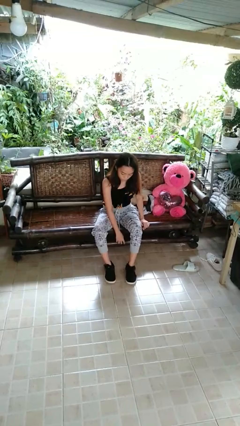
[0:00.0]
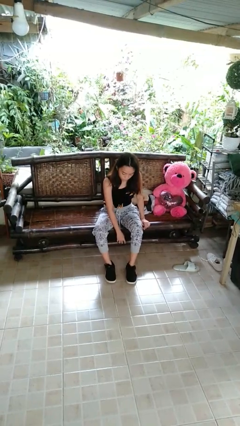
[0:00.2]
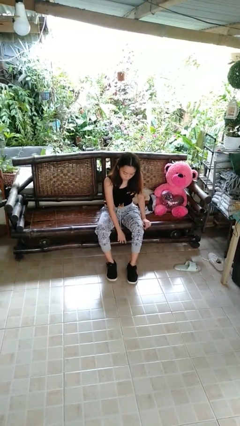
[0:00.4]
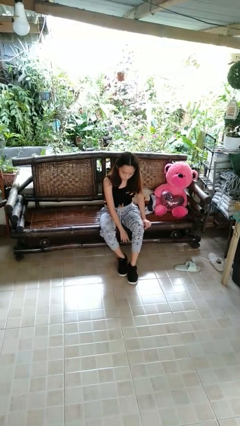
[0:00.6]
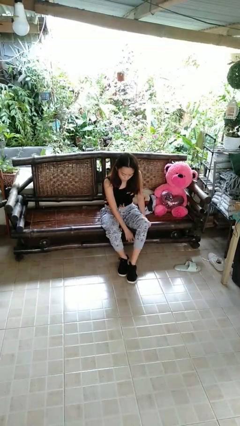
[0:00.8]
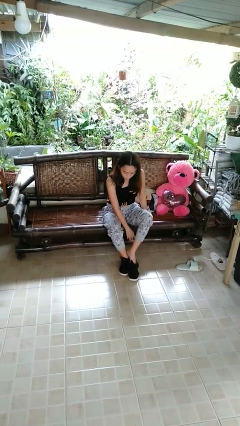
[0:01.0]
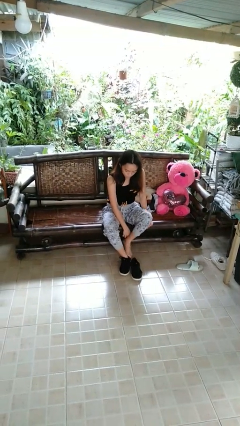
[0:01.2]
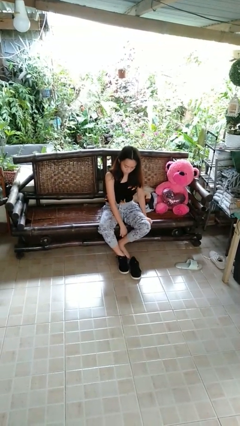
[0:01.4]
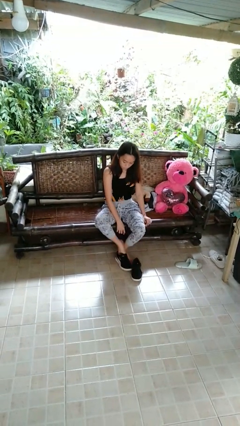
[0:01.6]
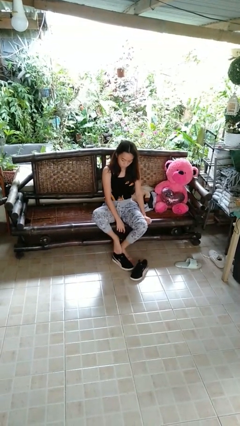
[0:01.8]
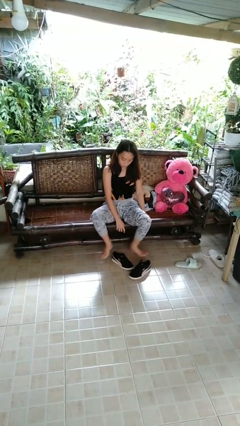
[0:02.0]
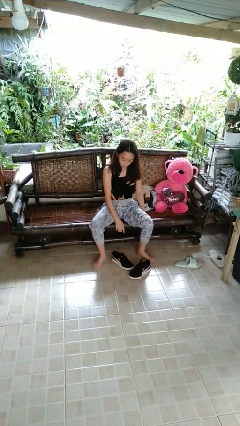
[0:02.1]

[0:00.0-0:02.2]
person takes off shoes

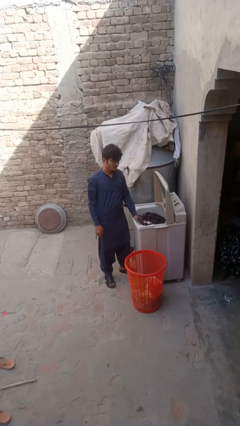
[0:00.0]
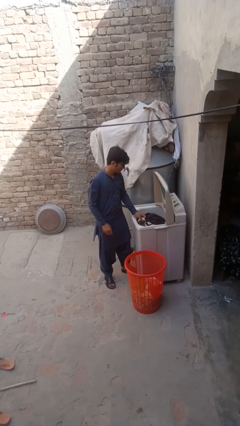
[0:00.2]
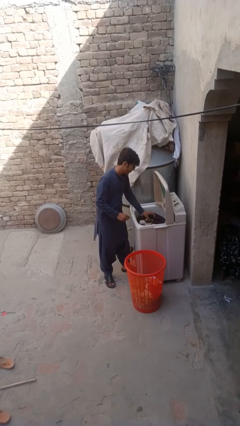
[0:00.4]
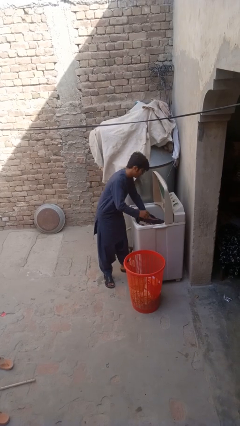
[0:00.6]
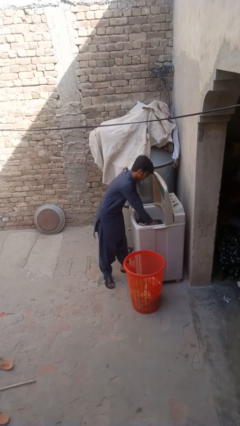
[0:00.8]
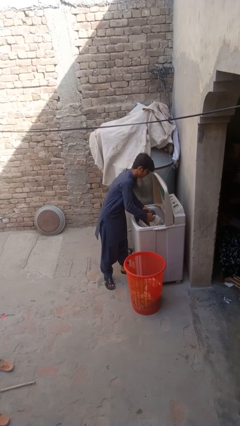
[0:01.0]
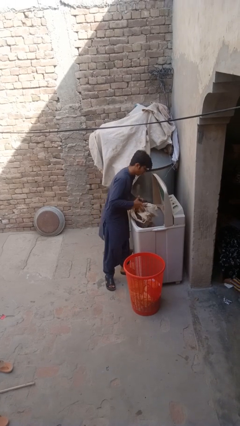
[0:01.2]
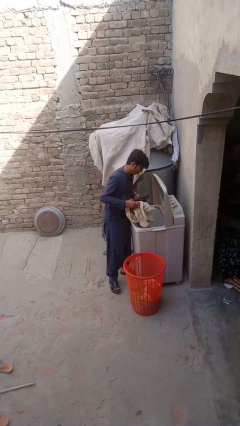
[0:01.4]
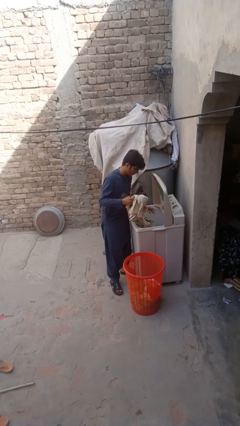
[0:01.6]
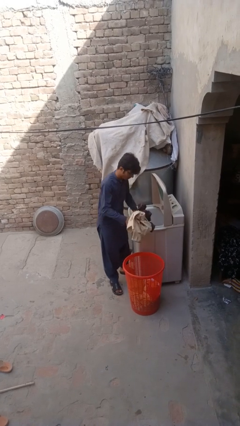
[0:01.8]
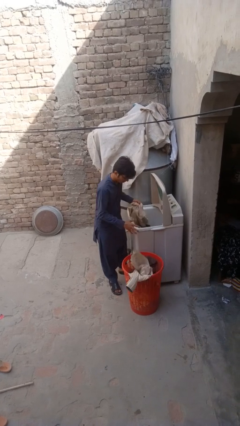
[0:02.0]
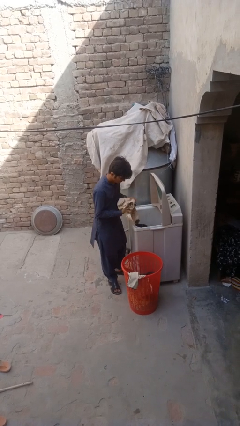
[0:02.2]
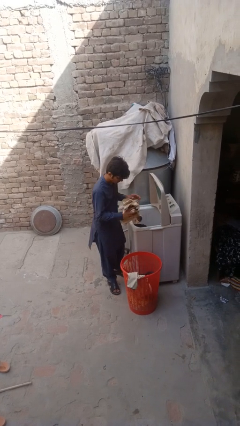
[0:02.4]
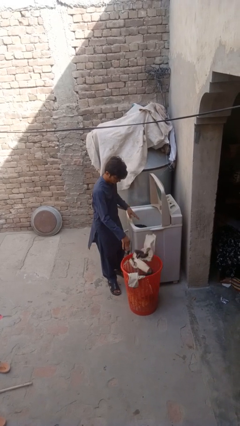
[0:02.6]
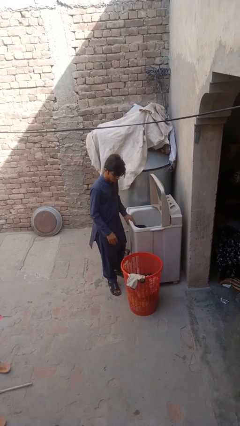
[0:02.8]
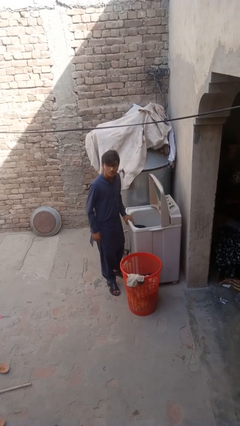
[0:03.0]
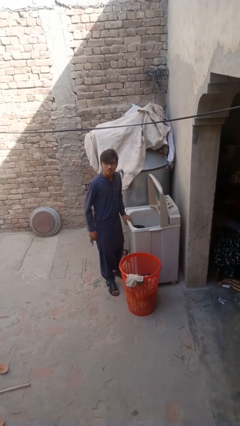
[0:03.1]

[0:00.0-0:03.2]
person unloads clotheswasher

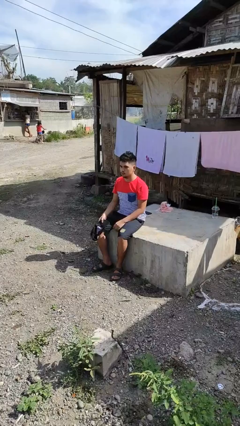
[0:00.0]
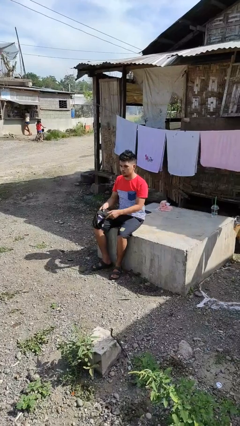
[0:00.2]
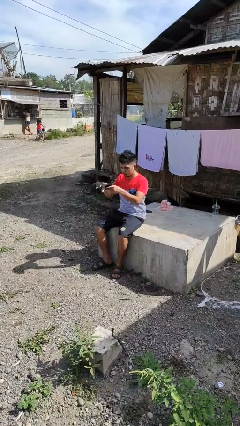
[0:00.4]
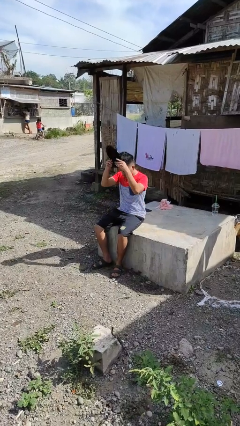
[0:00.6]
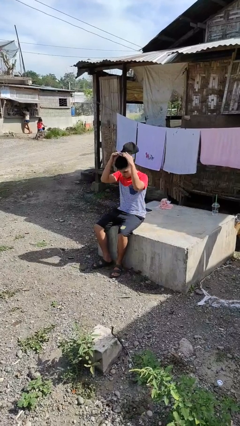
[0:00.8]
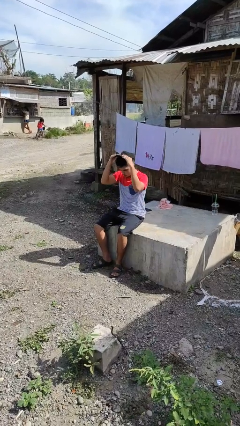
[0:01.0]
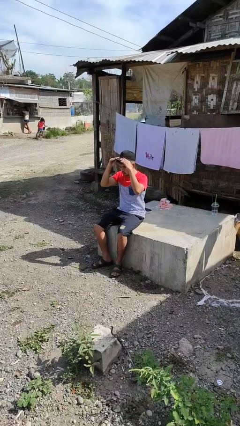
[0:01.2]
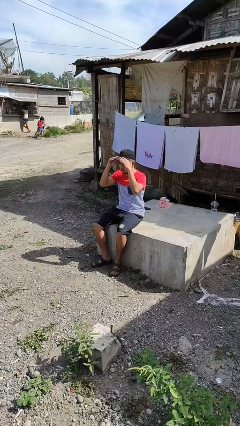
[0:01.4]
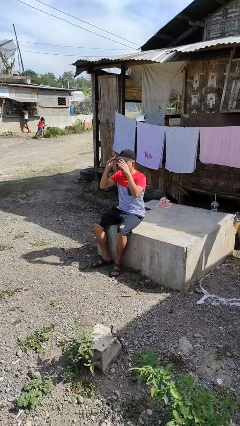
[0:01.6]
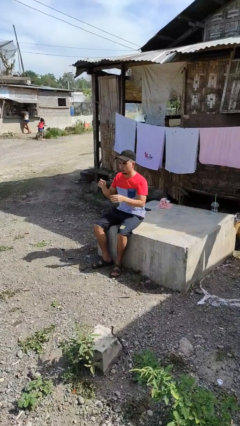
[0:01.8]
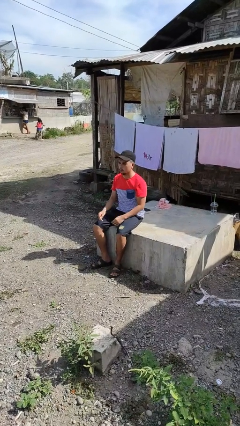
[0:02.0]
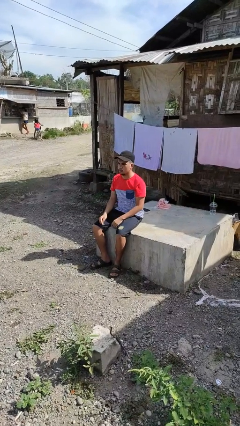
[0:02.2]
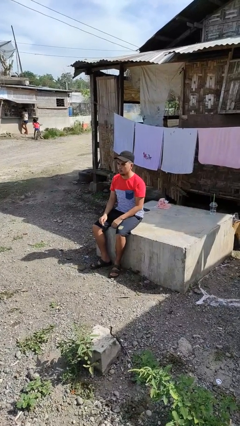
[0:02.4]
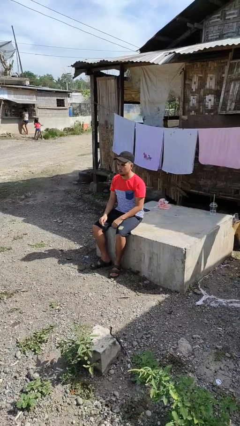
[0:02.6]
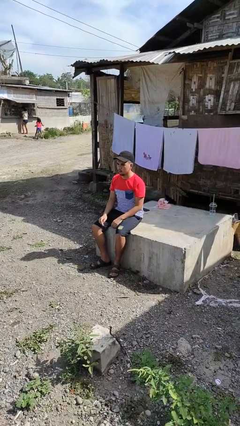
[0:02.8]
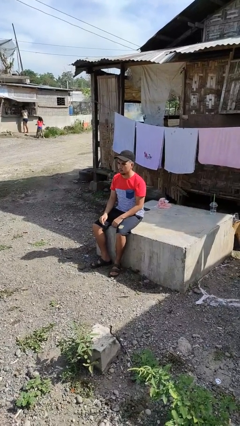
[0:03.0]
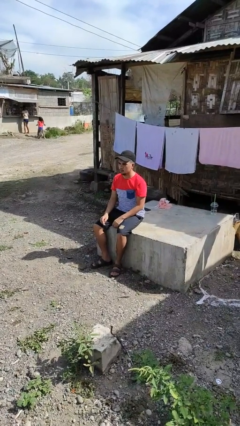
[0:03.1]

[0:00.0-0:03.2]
person puts on hat

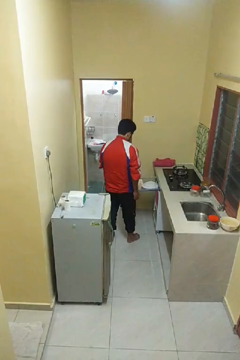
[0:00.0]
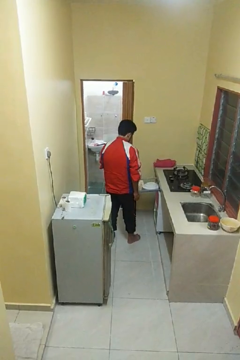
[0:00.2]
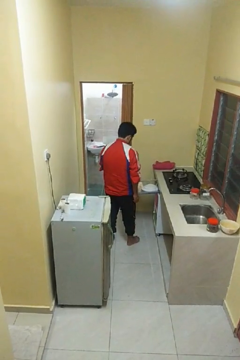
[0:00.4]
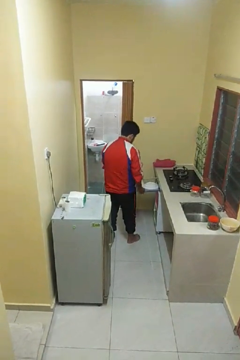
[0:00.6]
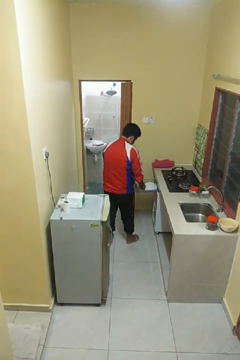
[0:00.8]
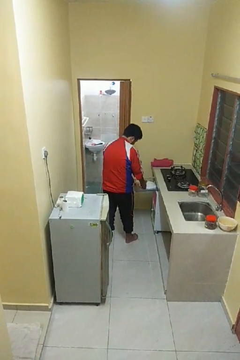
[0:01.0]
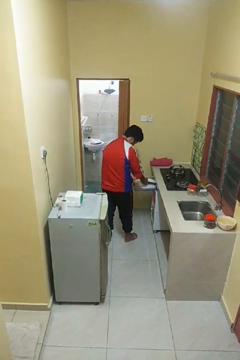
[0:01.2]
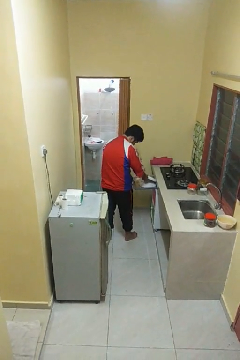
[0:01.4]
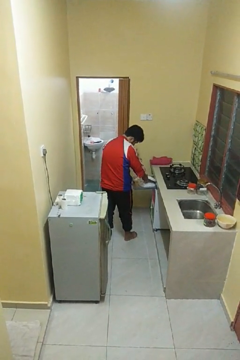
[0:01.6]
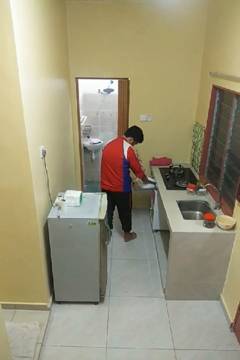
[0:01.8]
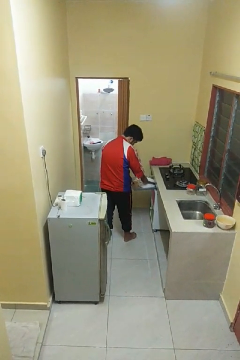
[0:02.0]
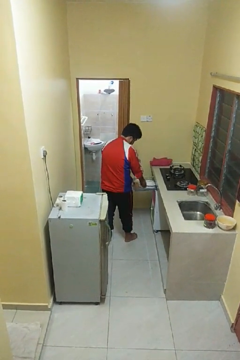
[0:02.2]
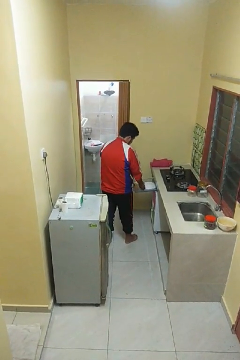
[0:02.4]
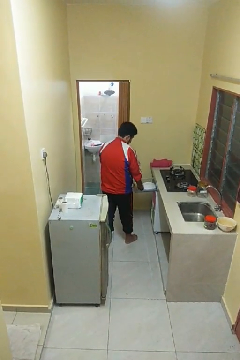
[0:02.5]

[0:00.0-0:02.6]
person searches in kitchen drawer

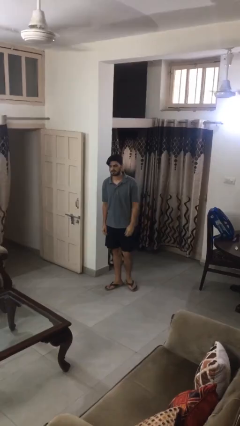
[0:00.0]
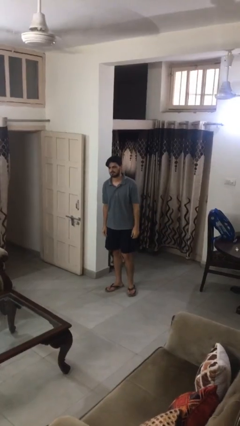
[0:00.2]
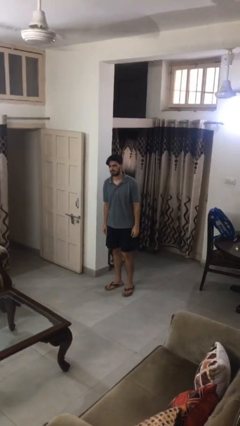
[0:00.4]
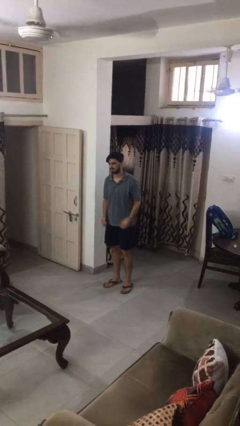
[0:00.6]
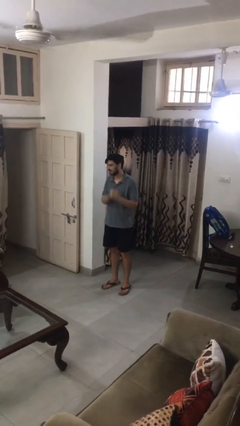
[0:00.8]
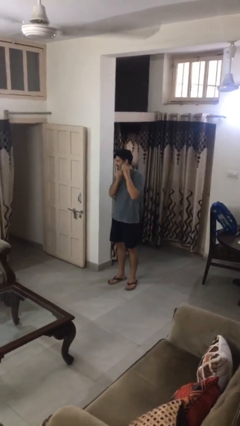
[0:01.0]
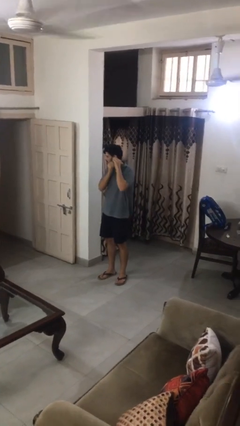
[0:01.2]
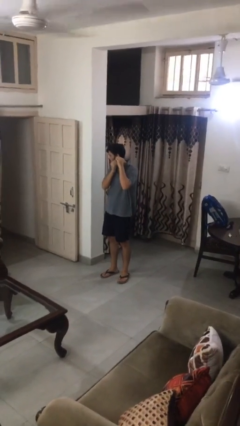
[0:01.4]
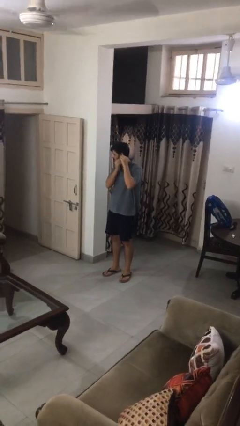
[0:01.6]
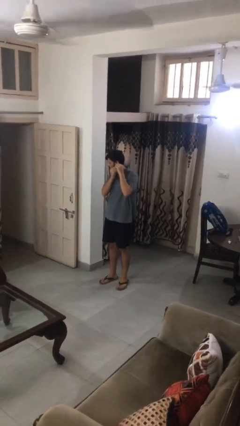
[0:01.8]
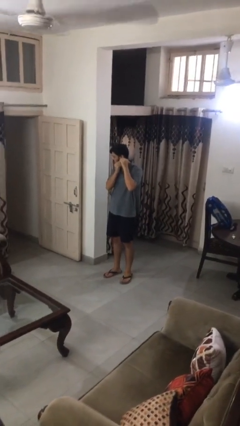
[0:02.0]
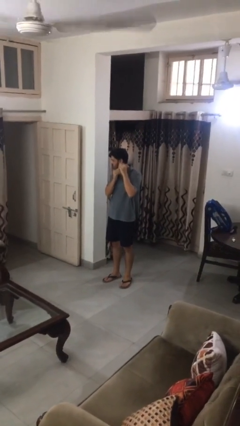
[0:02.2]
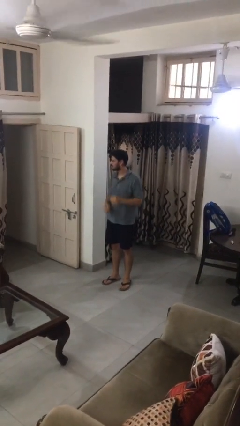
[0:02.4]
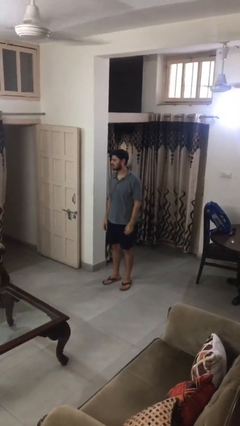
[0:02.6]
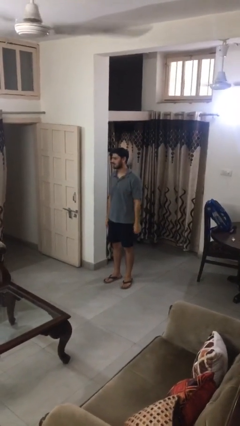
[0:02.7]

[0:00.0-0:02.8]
person puts on earrings

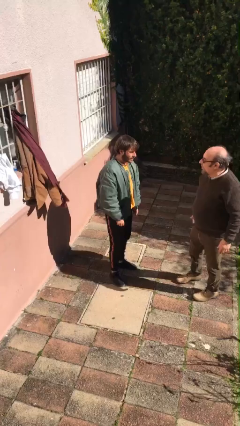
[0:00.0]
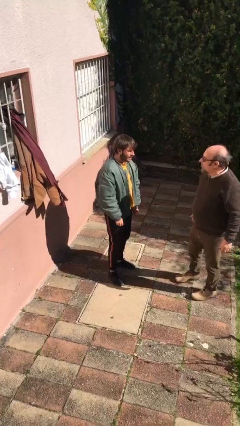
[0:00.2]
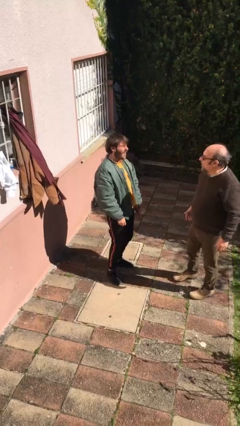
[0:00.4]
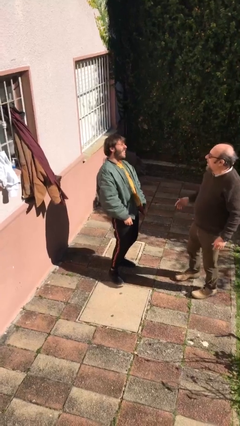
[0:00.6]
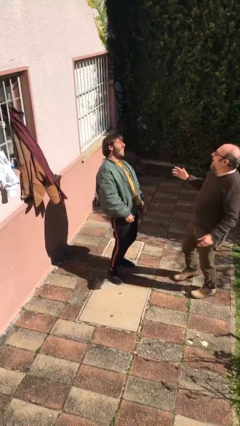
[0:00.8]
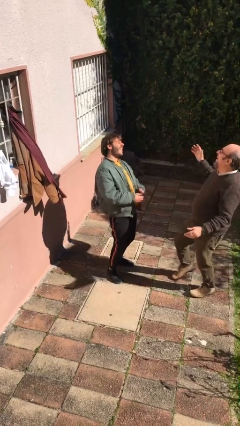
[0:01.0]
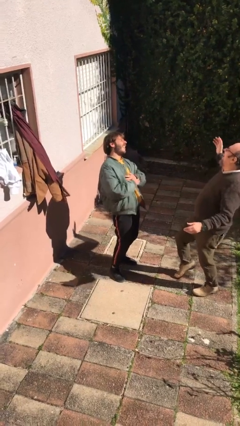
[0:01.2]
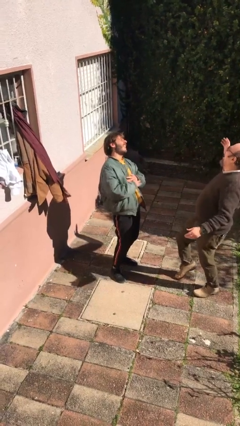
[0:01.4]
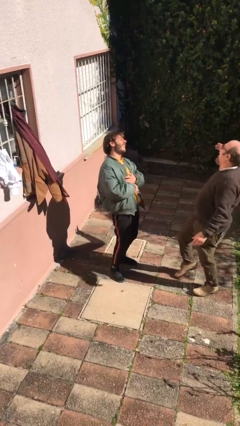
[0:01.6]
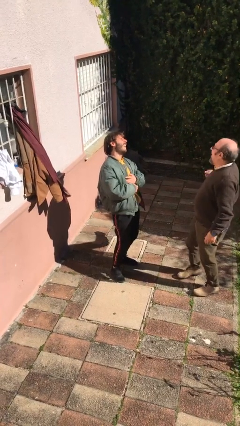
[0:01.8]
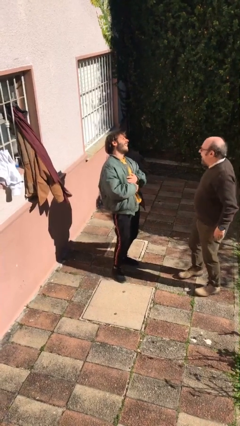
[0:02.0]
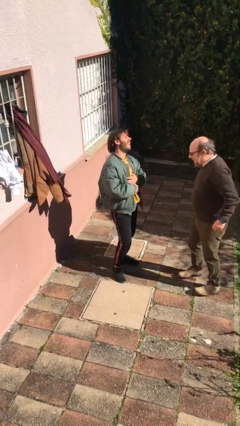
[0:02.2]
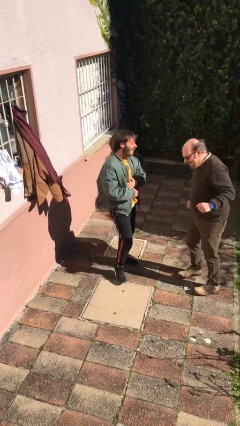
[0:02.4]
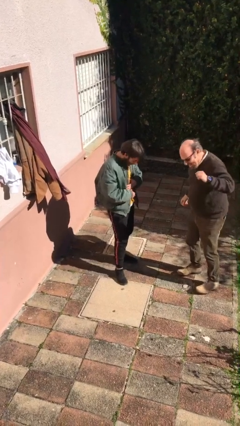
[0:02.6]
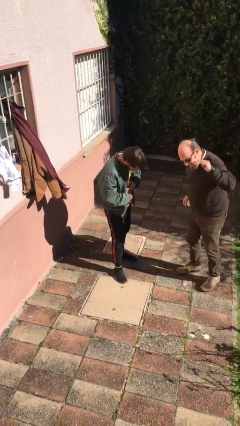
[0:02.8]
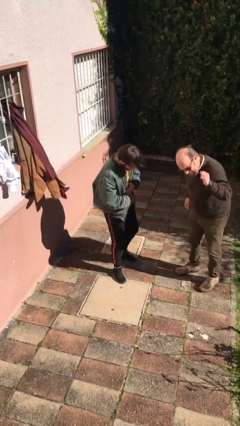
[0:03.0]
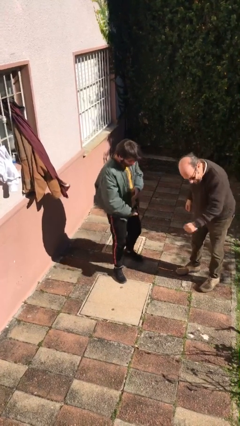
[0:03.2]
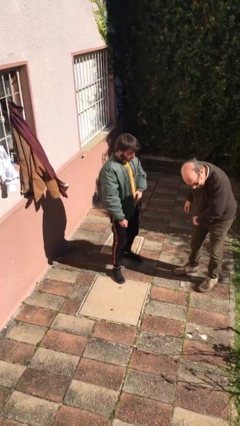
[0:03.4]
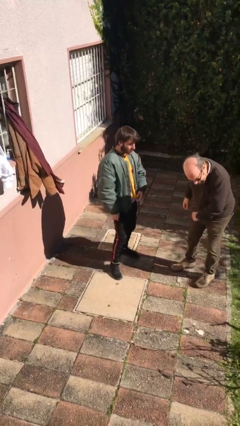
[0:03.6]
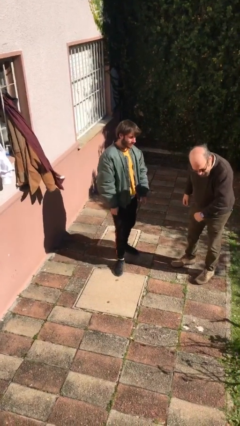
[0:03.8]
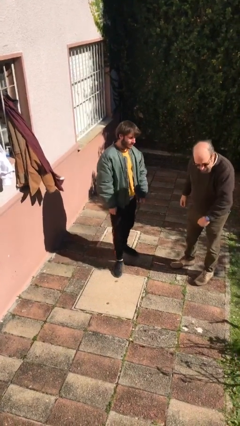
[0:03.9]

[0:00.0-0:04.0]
person laughs with person
